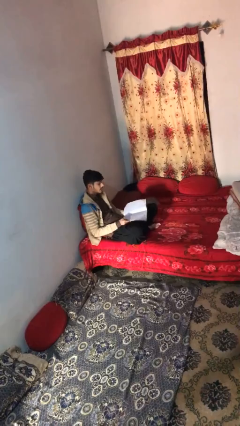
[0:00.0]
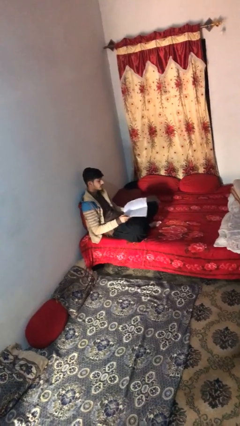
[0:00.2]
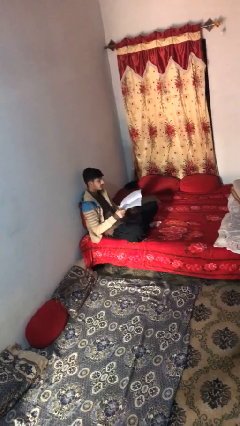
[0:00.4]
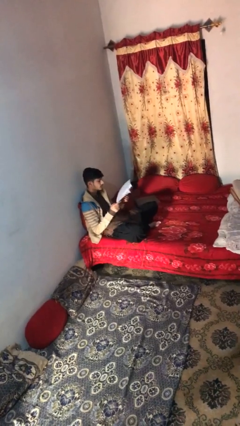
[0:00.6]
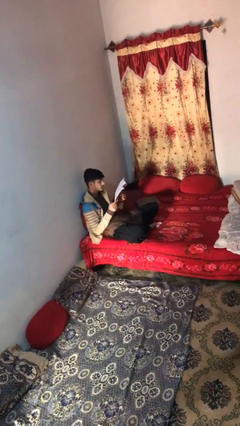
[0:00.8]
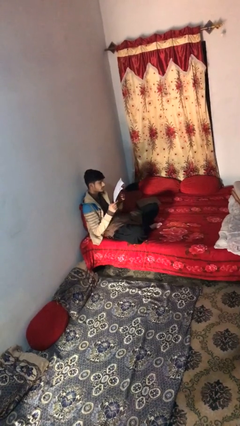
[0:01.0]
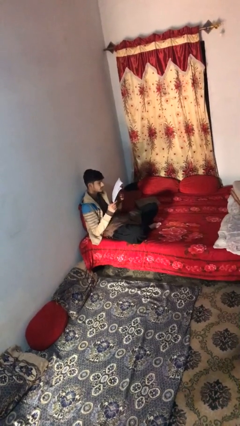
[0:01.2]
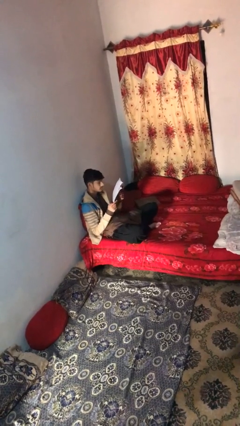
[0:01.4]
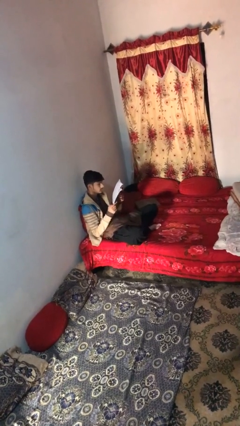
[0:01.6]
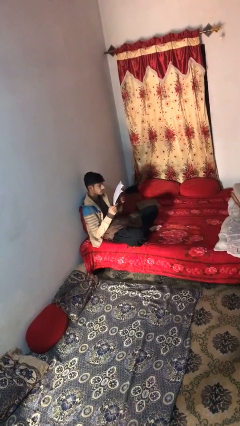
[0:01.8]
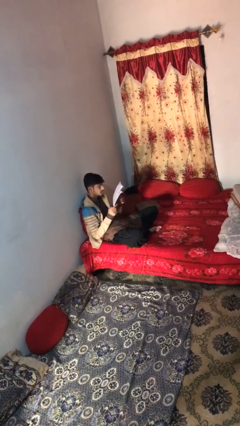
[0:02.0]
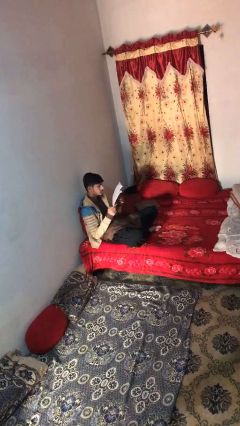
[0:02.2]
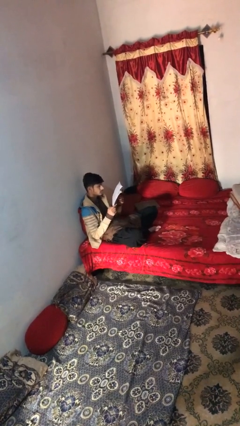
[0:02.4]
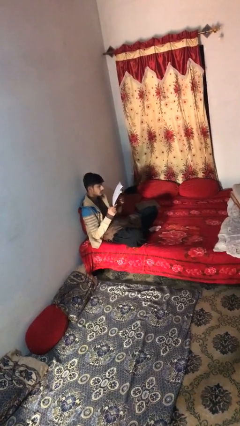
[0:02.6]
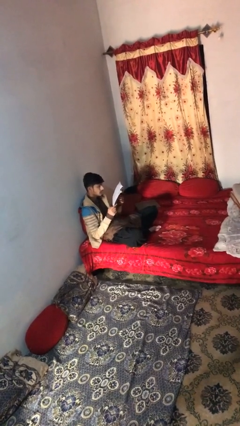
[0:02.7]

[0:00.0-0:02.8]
person reads document

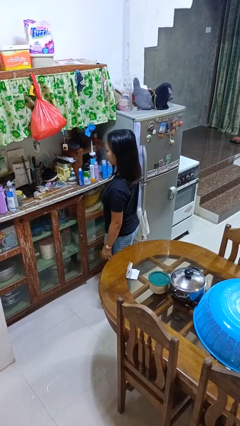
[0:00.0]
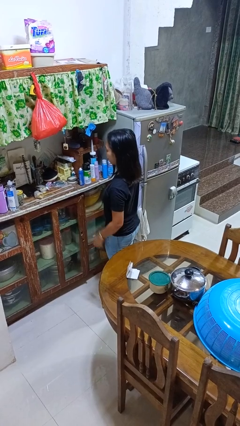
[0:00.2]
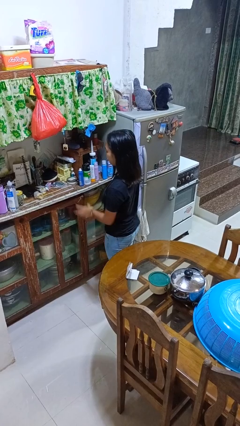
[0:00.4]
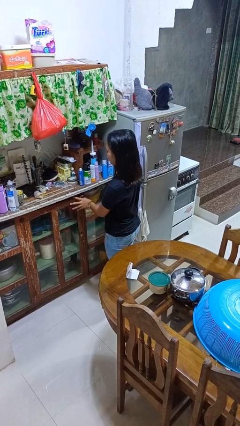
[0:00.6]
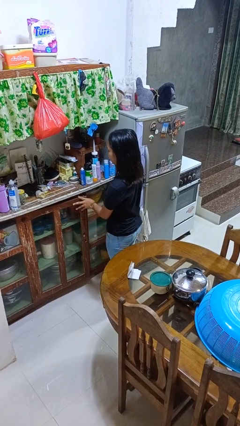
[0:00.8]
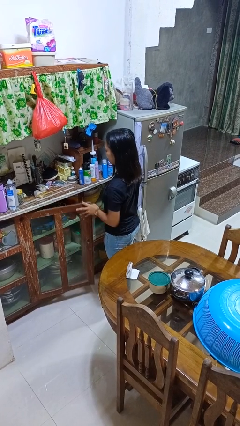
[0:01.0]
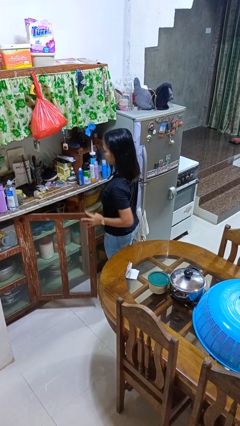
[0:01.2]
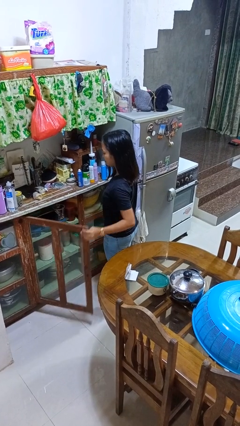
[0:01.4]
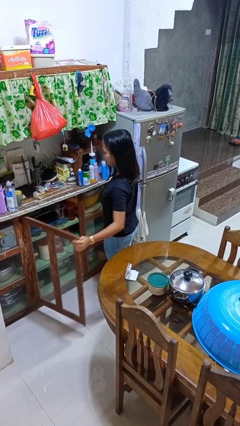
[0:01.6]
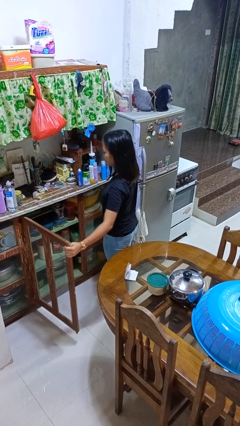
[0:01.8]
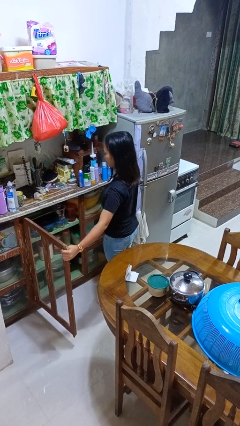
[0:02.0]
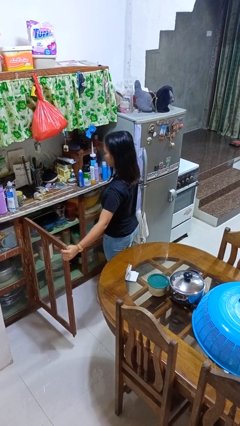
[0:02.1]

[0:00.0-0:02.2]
person opens cabinet

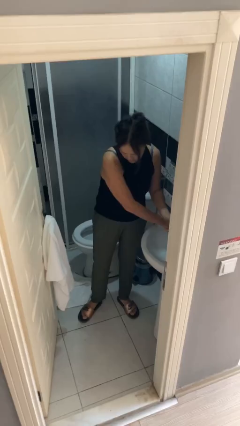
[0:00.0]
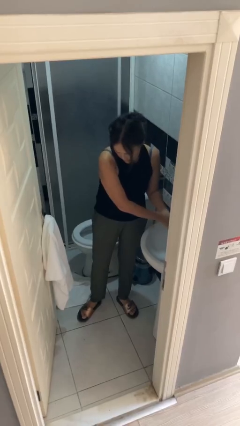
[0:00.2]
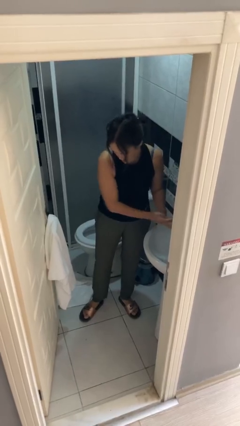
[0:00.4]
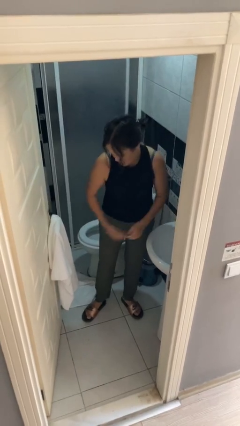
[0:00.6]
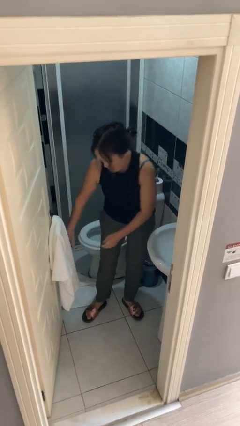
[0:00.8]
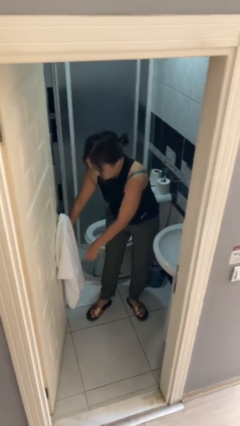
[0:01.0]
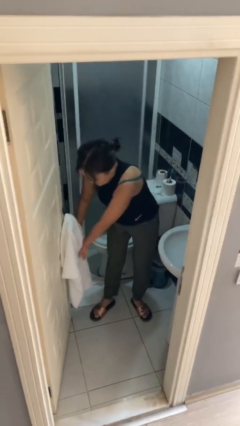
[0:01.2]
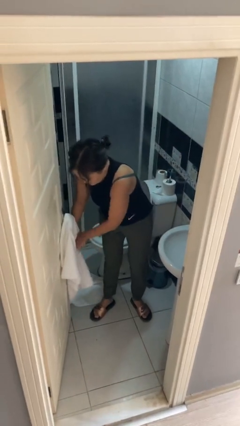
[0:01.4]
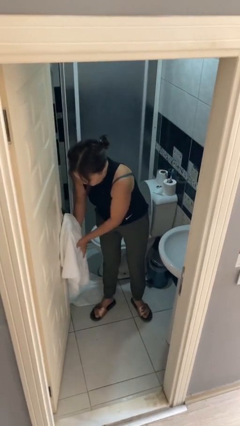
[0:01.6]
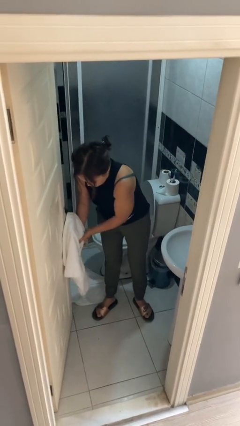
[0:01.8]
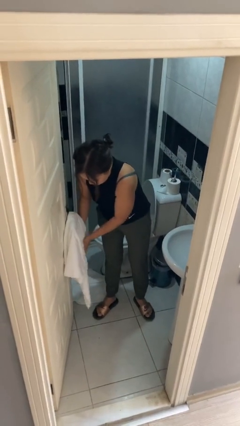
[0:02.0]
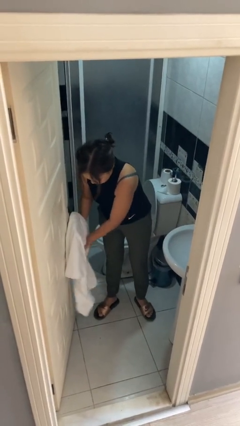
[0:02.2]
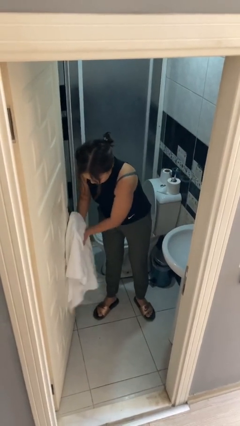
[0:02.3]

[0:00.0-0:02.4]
person dries hands with towel

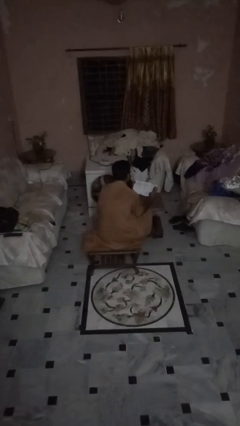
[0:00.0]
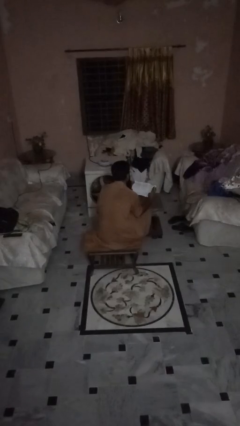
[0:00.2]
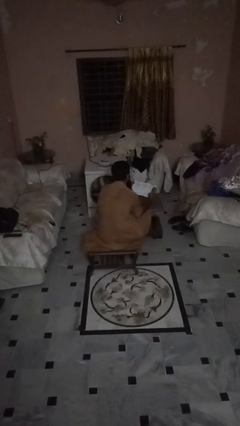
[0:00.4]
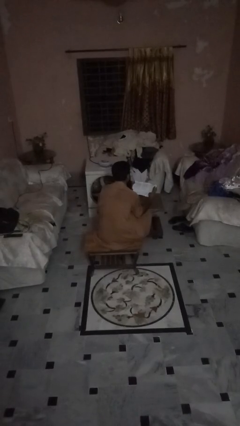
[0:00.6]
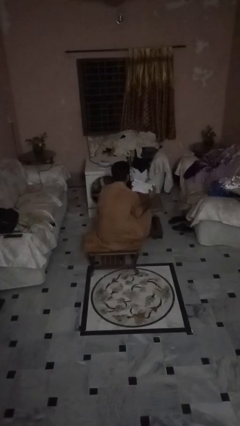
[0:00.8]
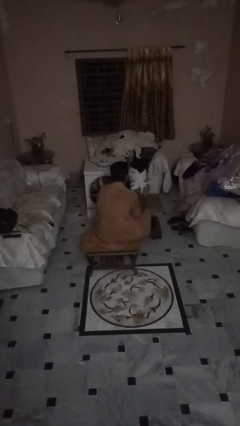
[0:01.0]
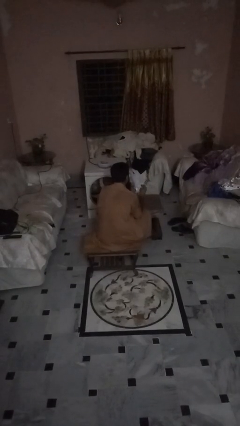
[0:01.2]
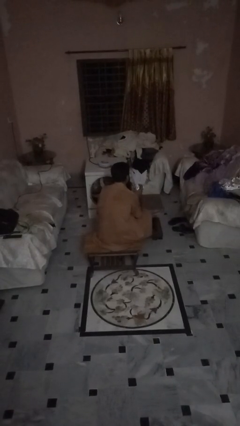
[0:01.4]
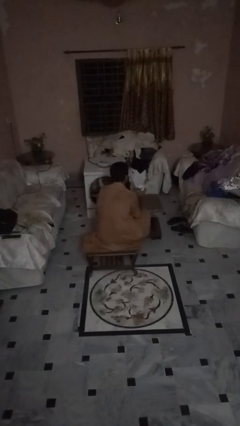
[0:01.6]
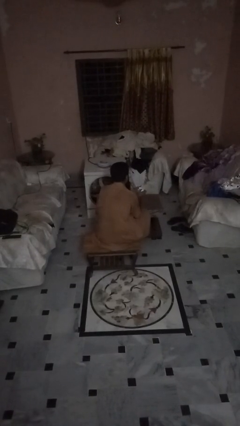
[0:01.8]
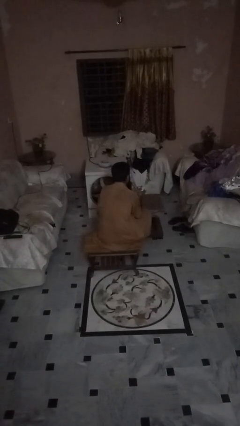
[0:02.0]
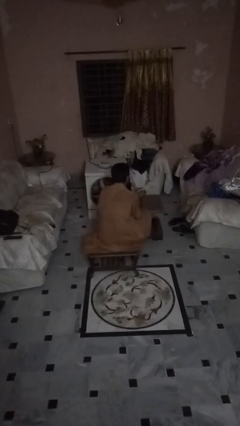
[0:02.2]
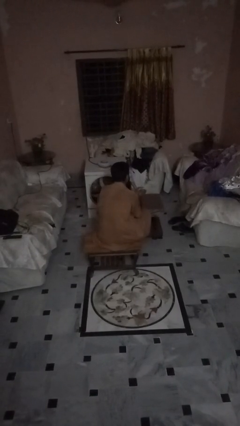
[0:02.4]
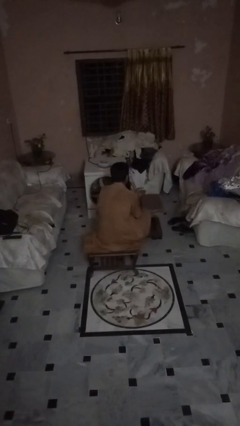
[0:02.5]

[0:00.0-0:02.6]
person crumples paper

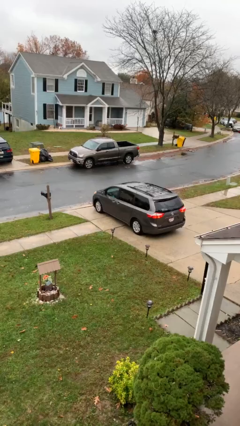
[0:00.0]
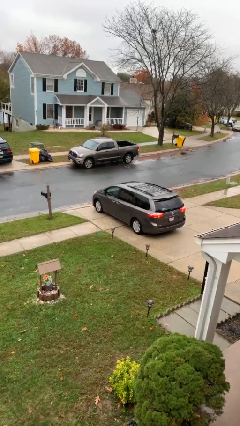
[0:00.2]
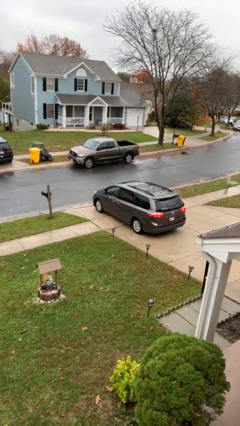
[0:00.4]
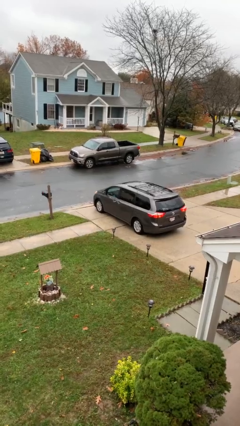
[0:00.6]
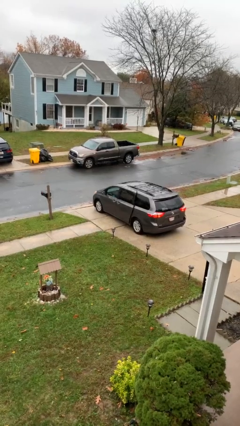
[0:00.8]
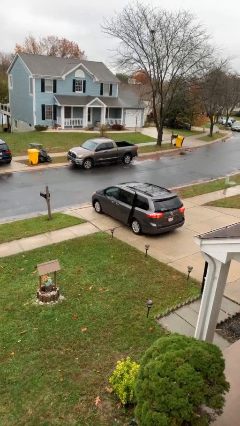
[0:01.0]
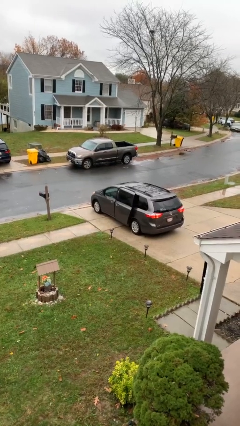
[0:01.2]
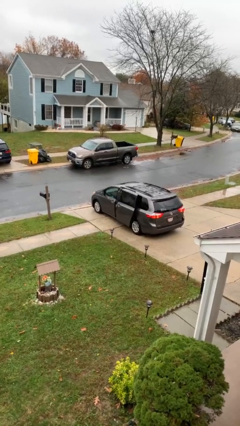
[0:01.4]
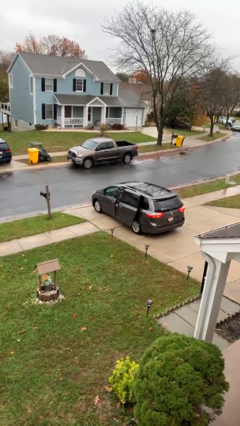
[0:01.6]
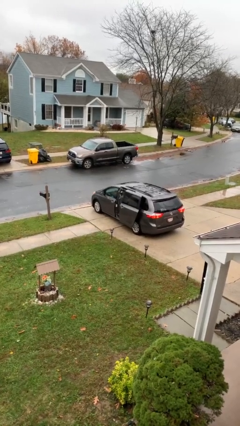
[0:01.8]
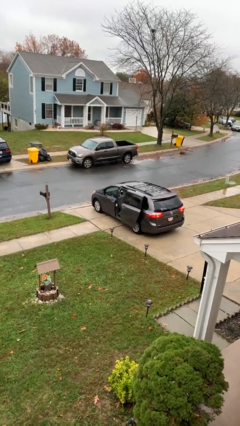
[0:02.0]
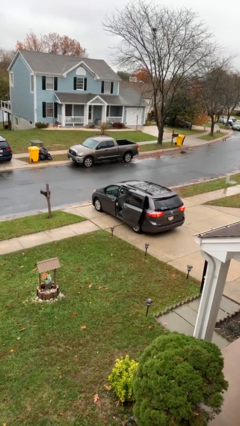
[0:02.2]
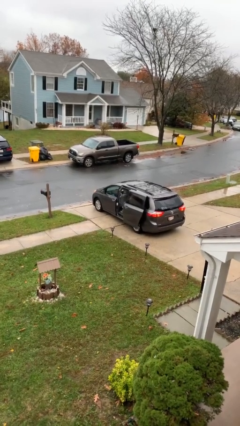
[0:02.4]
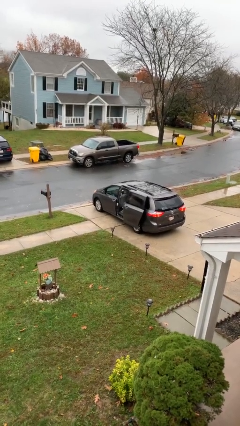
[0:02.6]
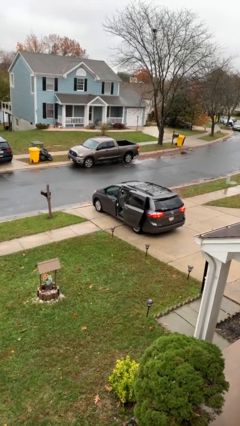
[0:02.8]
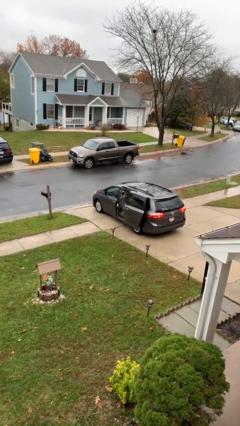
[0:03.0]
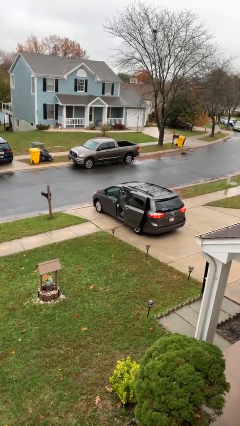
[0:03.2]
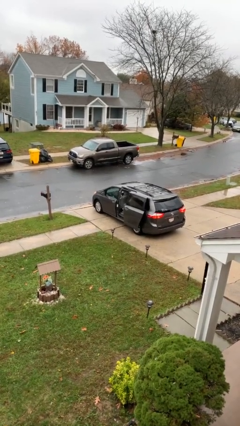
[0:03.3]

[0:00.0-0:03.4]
person opens car door

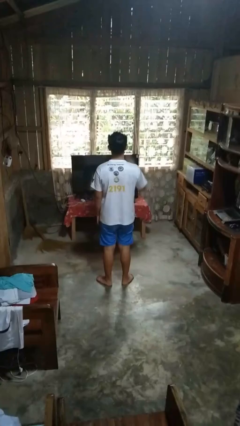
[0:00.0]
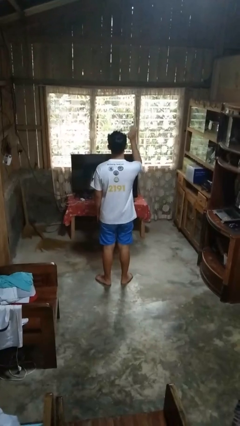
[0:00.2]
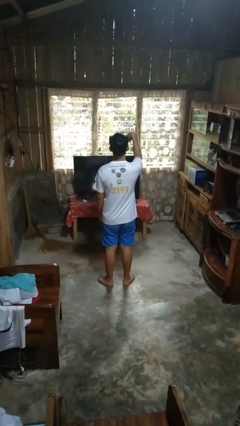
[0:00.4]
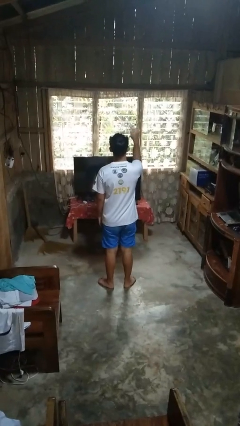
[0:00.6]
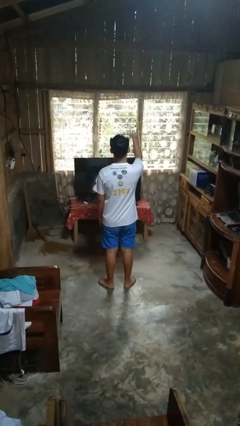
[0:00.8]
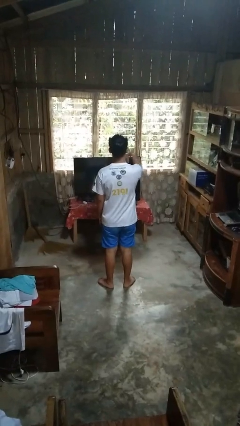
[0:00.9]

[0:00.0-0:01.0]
person gestures come here

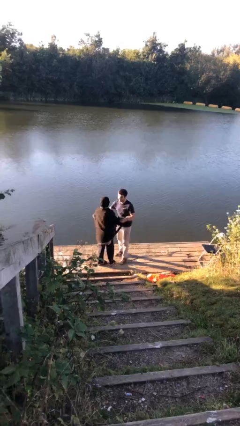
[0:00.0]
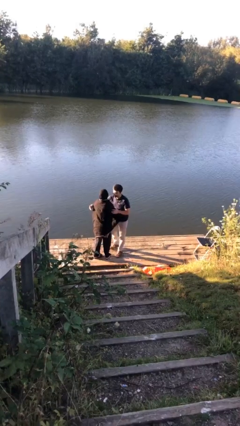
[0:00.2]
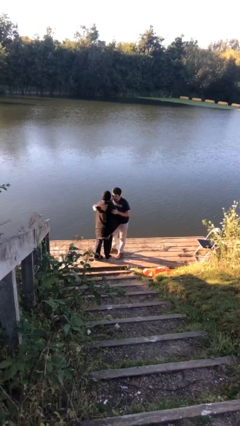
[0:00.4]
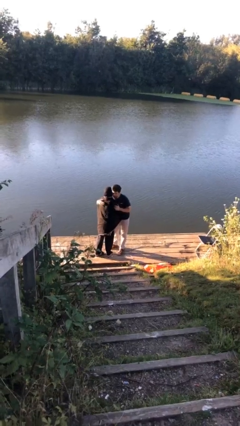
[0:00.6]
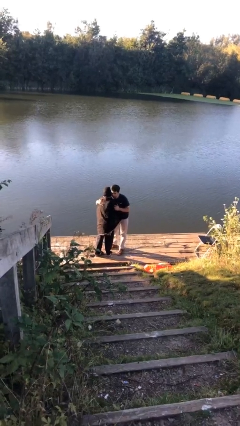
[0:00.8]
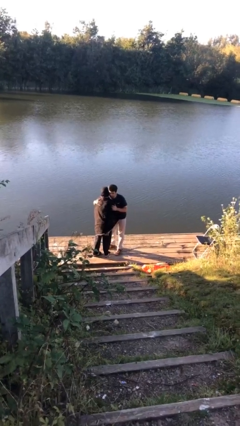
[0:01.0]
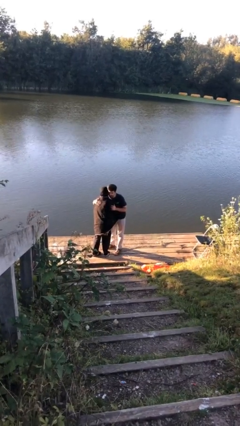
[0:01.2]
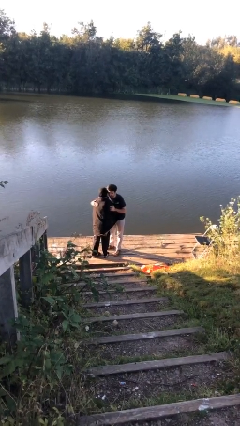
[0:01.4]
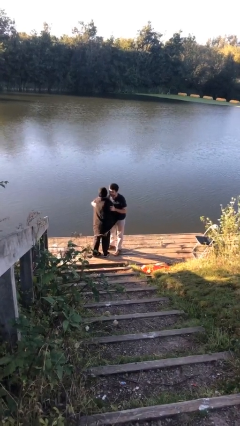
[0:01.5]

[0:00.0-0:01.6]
person embraces person

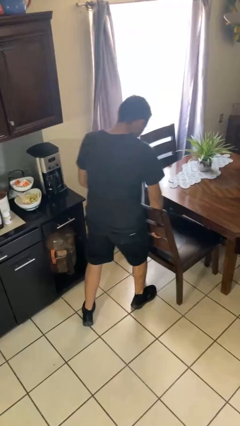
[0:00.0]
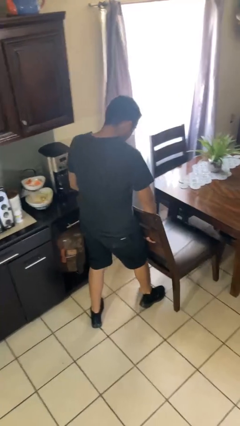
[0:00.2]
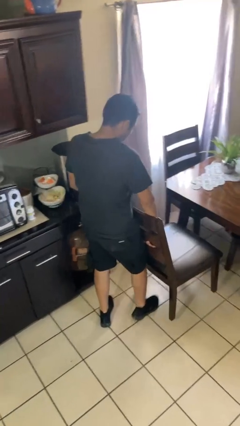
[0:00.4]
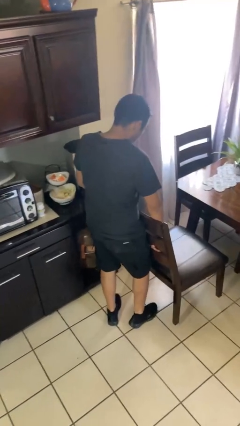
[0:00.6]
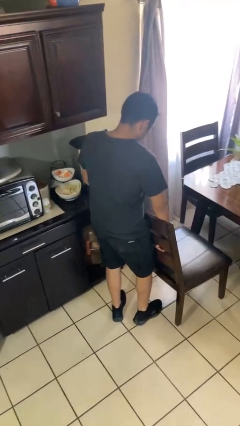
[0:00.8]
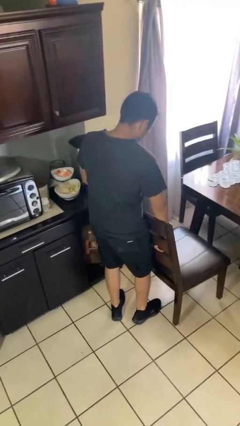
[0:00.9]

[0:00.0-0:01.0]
person pulls out chair
